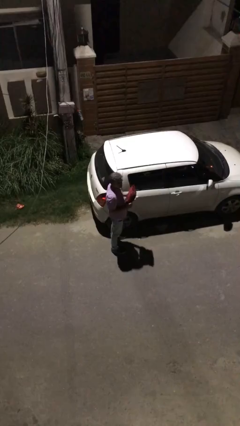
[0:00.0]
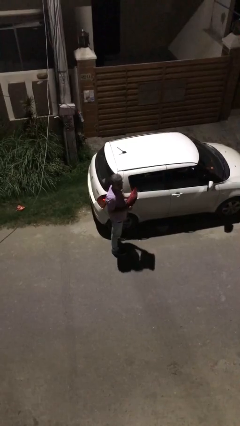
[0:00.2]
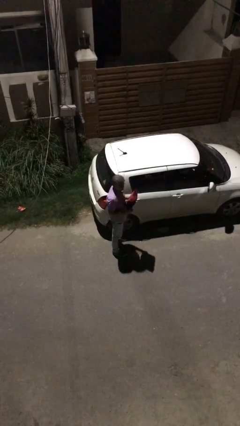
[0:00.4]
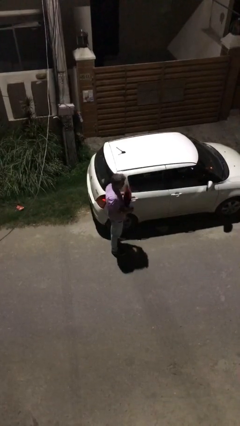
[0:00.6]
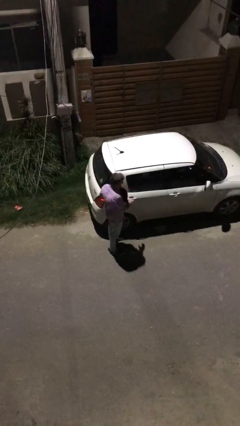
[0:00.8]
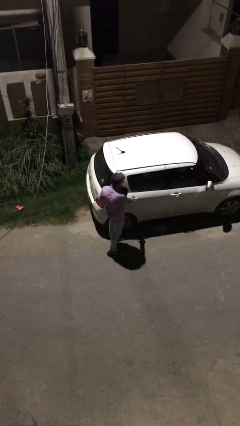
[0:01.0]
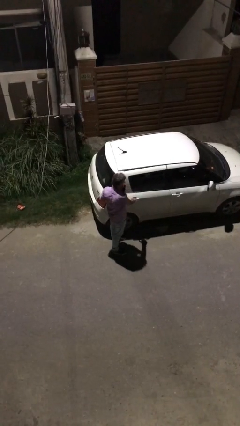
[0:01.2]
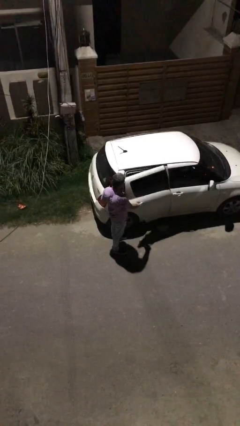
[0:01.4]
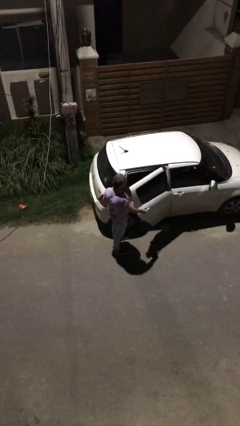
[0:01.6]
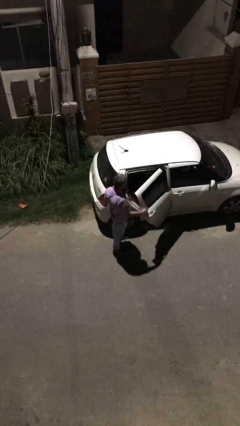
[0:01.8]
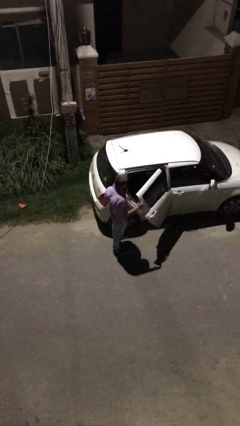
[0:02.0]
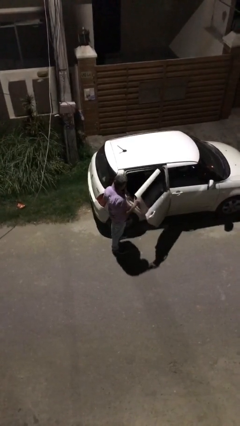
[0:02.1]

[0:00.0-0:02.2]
person opens car door

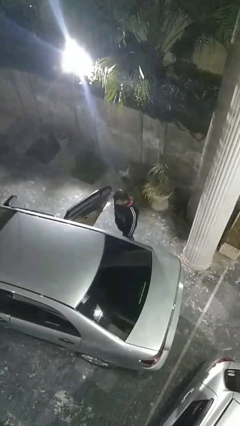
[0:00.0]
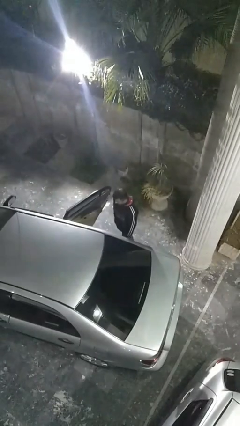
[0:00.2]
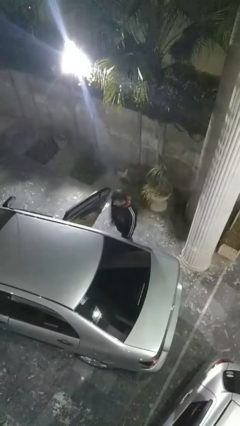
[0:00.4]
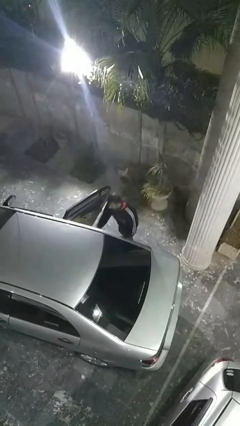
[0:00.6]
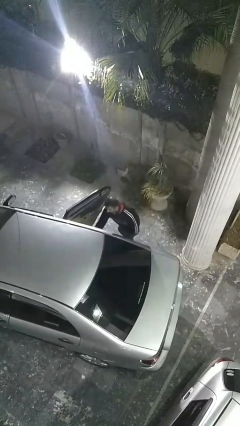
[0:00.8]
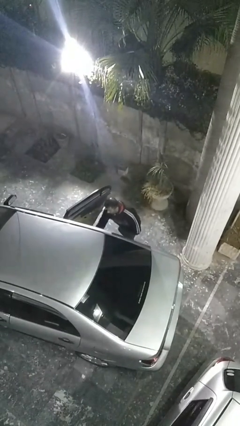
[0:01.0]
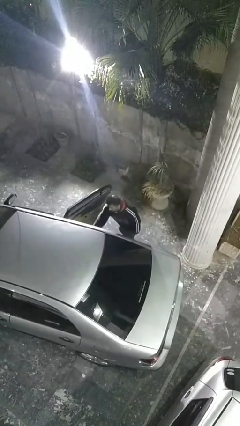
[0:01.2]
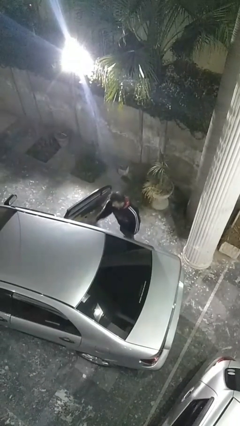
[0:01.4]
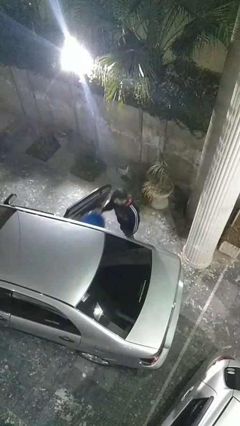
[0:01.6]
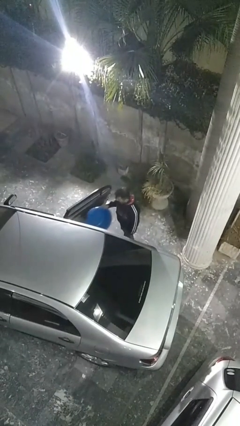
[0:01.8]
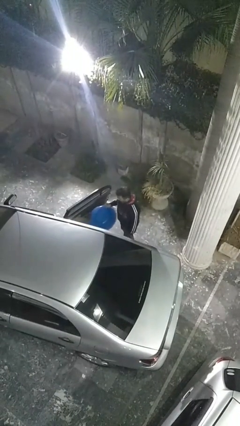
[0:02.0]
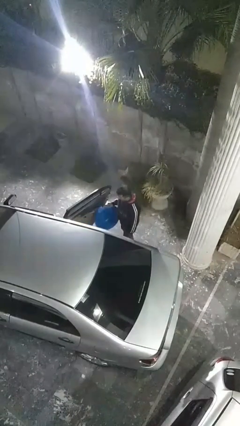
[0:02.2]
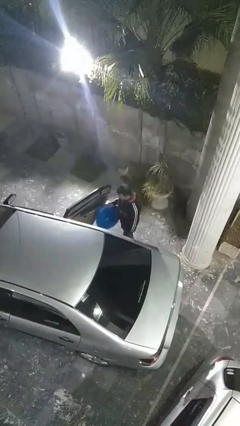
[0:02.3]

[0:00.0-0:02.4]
person unloads car

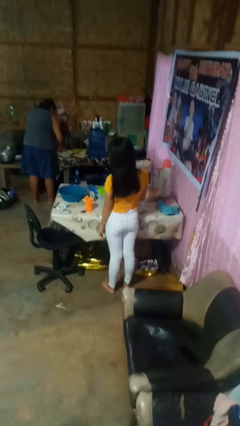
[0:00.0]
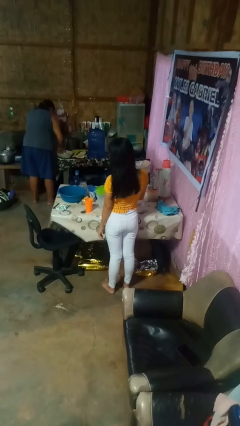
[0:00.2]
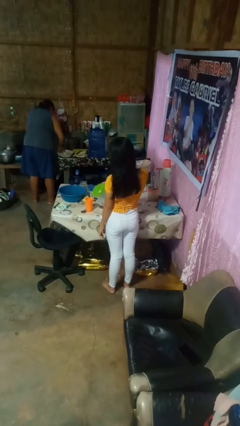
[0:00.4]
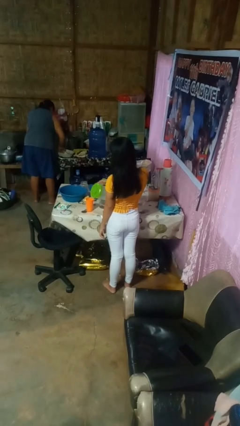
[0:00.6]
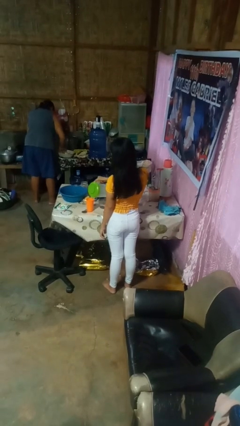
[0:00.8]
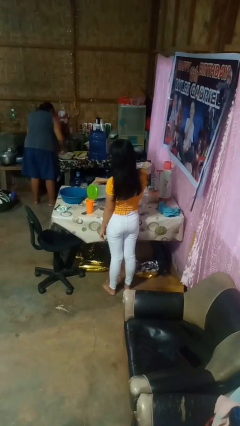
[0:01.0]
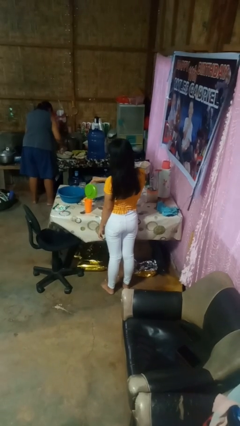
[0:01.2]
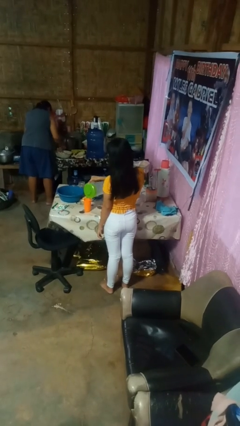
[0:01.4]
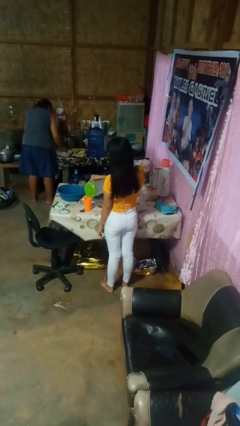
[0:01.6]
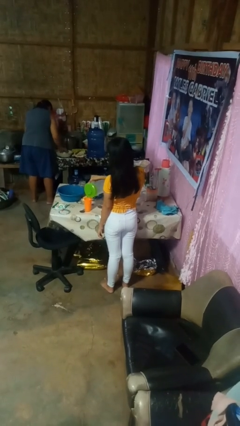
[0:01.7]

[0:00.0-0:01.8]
person pours liquid into cup

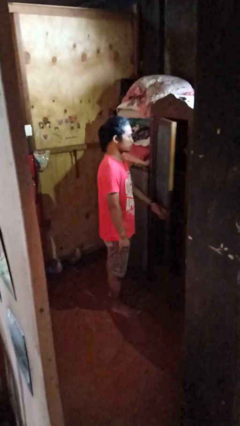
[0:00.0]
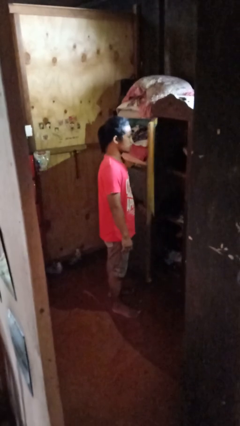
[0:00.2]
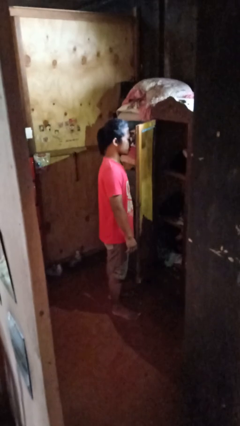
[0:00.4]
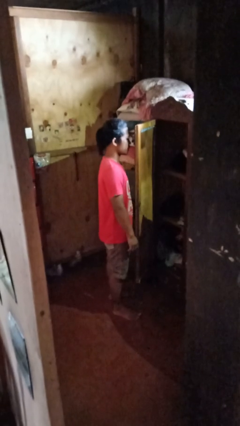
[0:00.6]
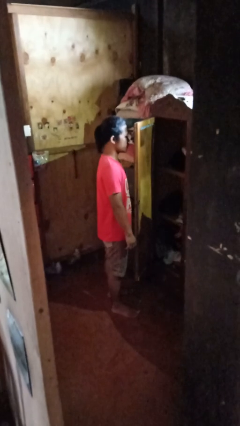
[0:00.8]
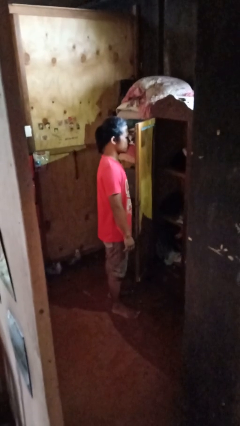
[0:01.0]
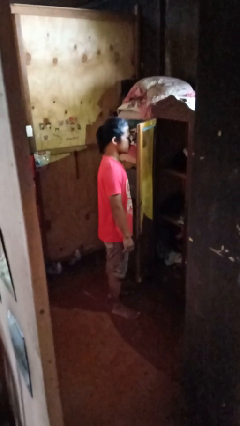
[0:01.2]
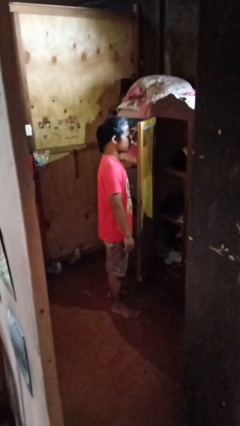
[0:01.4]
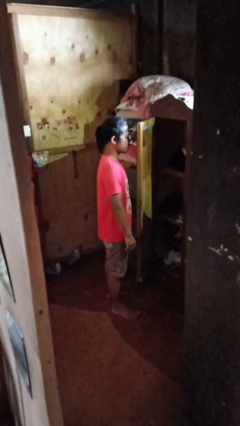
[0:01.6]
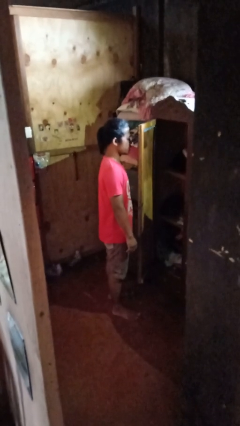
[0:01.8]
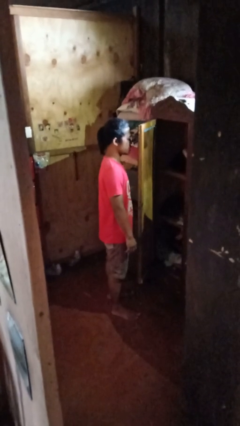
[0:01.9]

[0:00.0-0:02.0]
person opens closet door

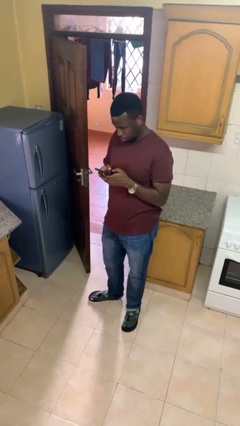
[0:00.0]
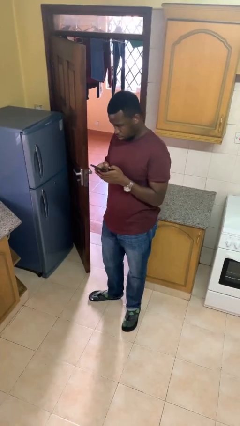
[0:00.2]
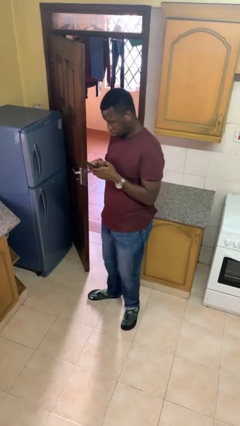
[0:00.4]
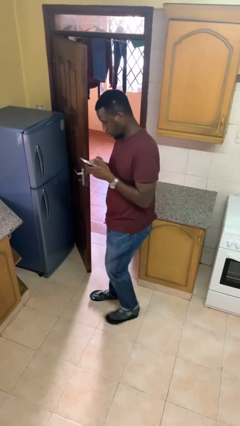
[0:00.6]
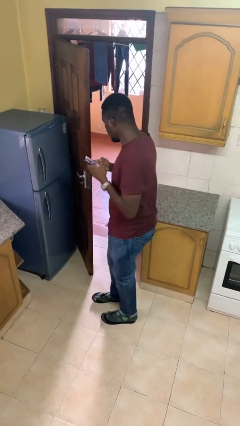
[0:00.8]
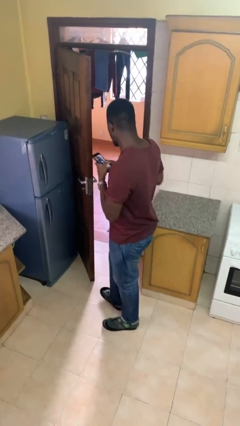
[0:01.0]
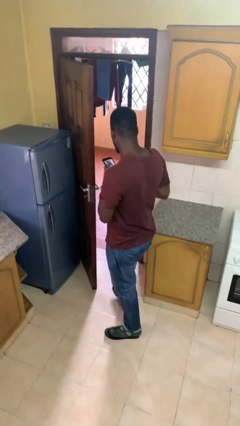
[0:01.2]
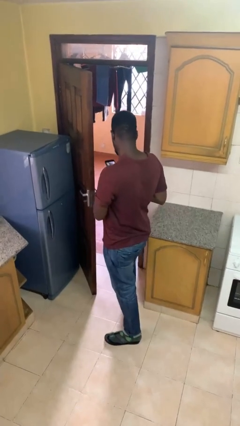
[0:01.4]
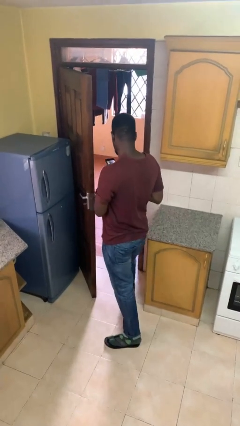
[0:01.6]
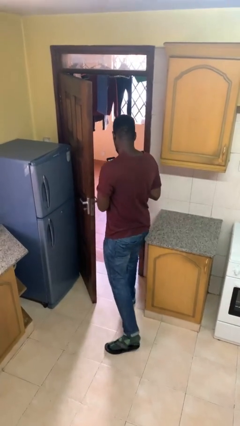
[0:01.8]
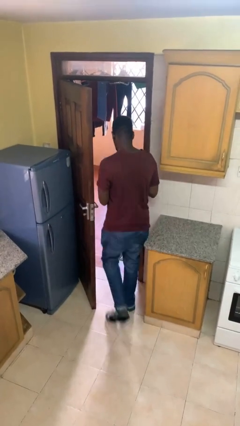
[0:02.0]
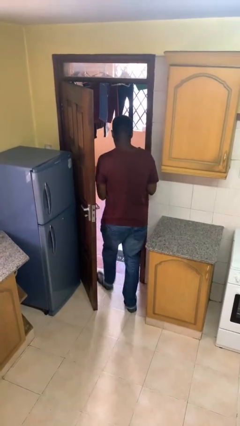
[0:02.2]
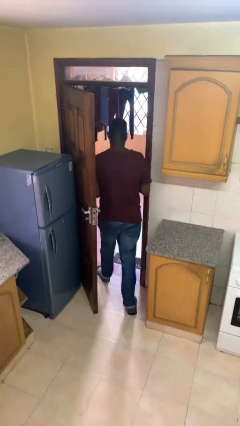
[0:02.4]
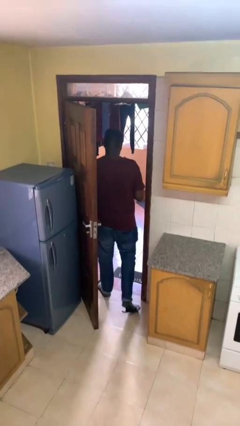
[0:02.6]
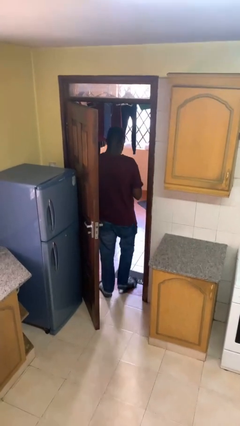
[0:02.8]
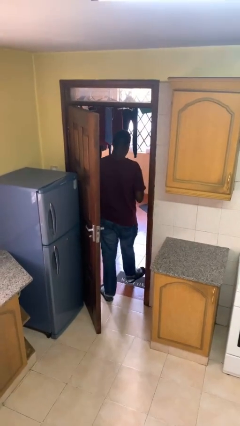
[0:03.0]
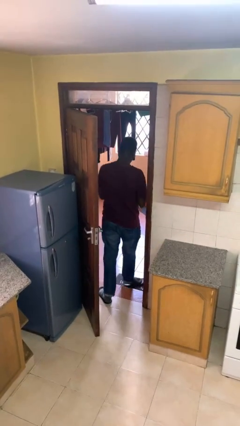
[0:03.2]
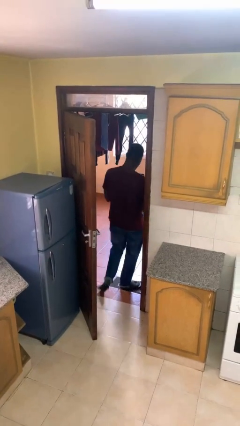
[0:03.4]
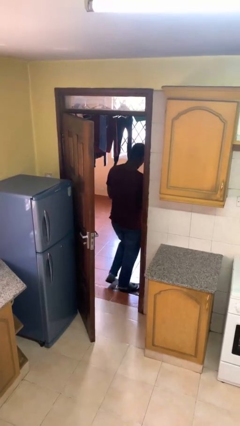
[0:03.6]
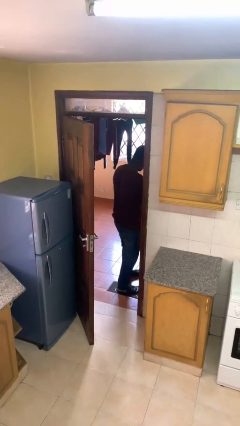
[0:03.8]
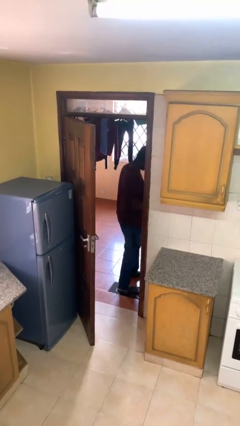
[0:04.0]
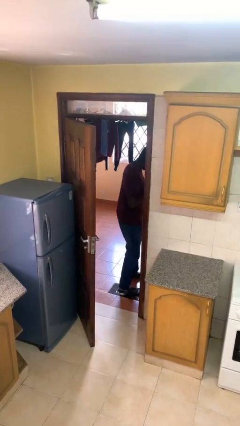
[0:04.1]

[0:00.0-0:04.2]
person exits scene through structure

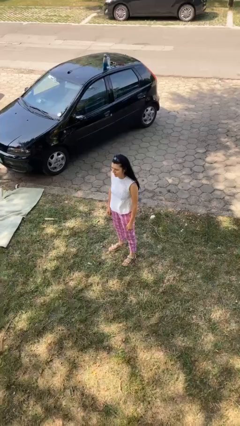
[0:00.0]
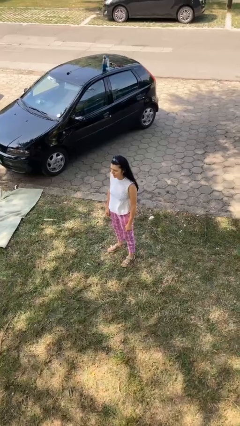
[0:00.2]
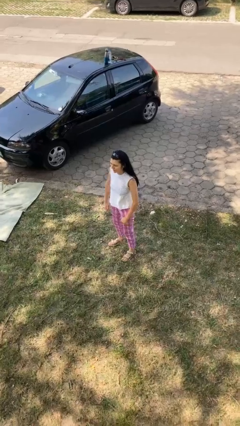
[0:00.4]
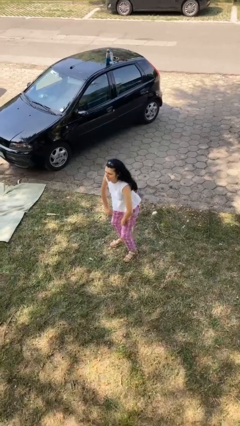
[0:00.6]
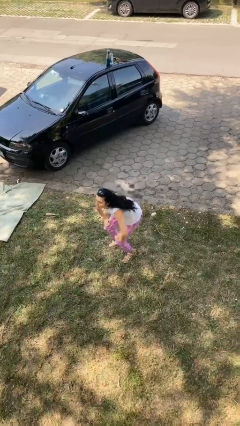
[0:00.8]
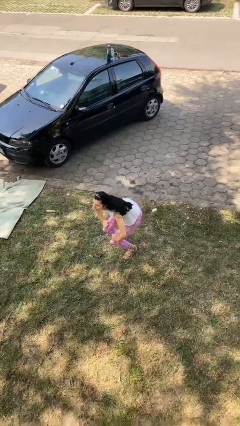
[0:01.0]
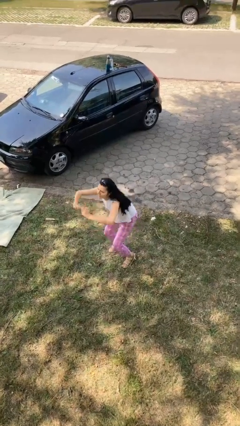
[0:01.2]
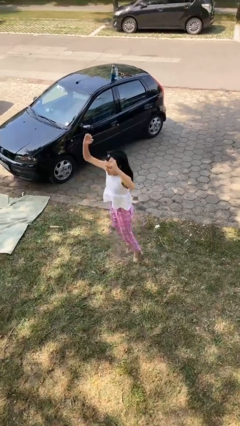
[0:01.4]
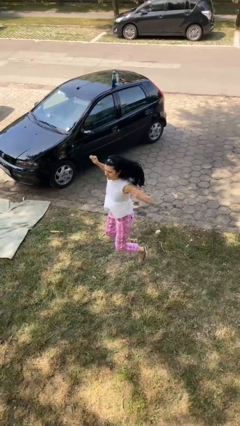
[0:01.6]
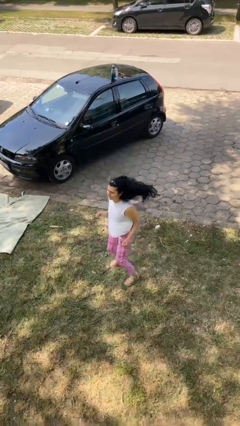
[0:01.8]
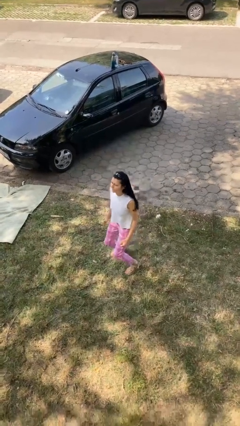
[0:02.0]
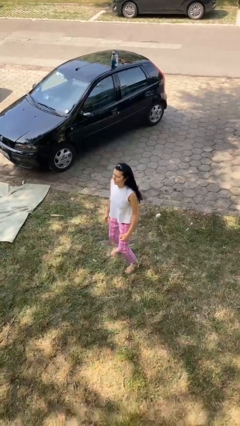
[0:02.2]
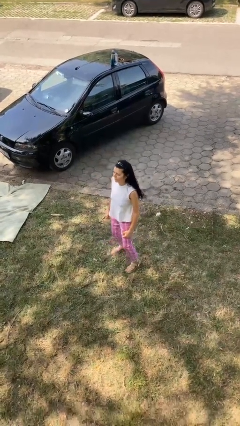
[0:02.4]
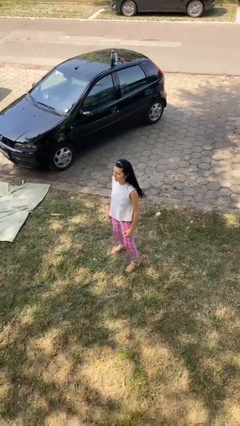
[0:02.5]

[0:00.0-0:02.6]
person jumps

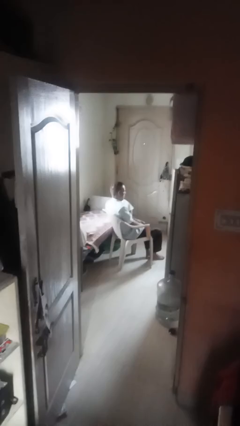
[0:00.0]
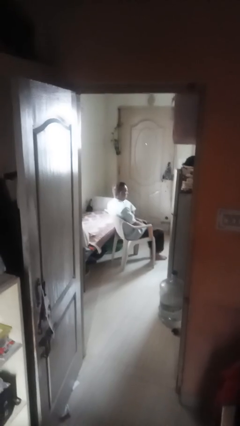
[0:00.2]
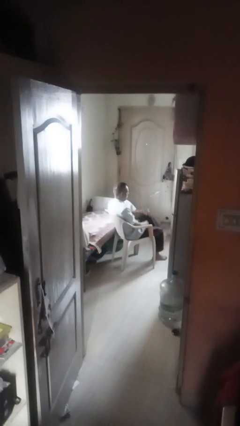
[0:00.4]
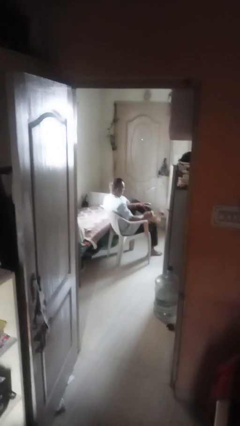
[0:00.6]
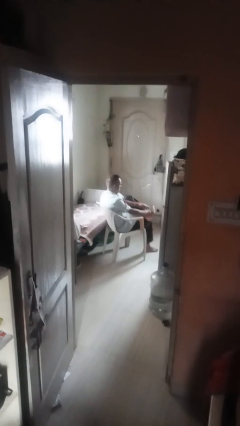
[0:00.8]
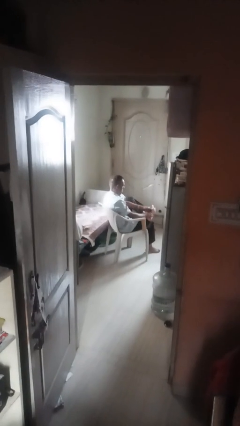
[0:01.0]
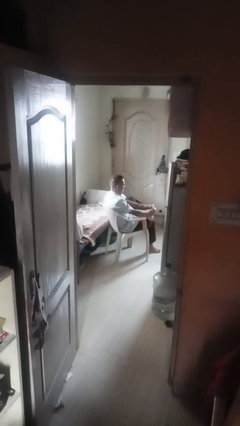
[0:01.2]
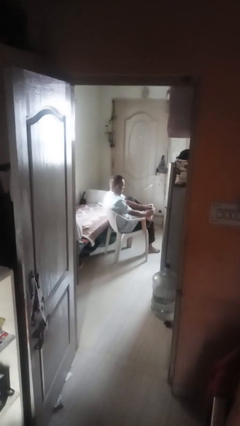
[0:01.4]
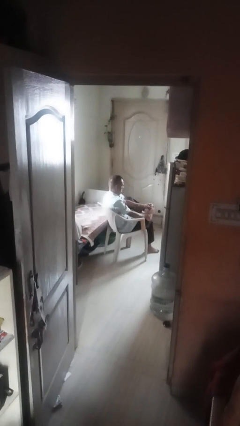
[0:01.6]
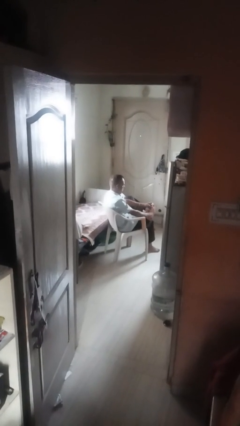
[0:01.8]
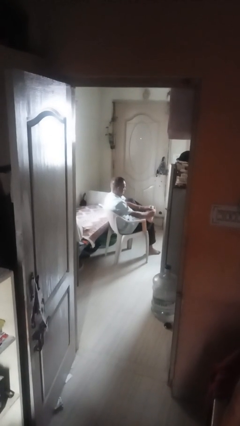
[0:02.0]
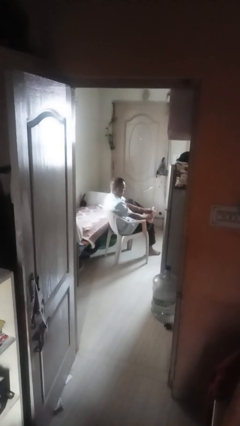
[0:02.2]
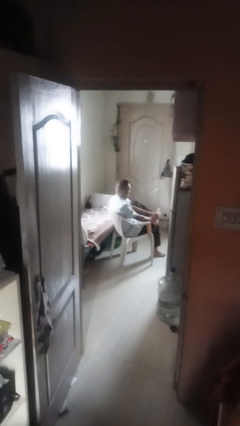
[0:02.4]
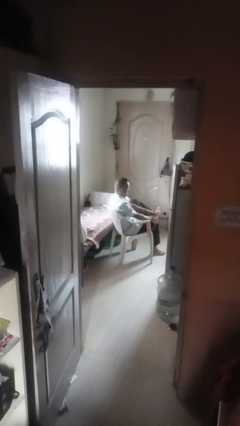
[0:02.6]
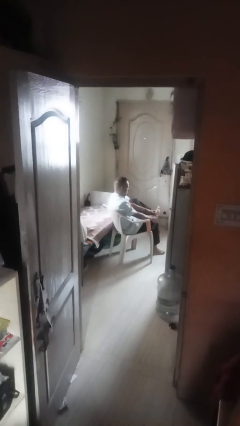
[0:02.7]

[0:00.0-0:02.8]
person rubs foot
